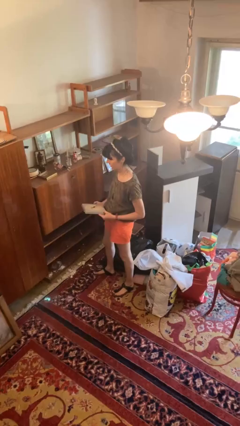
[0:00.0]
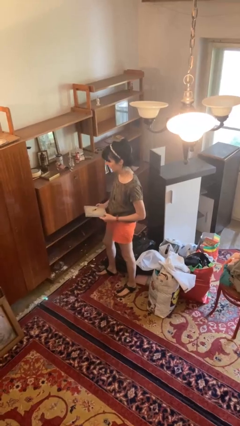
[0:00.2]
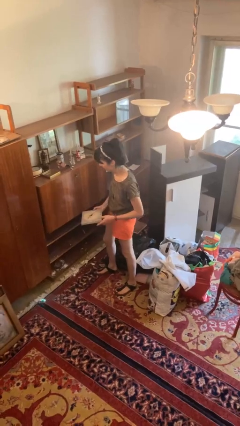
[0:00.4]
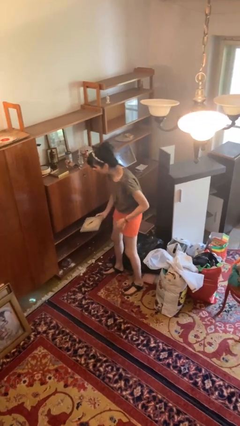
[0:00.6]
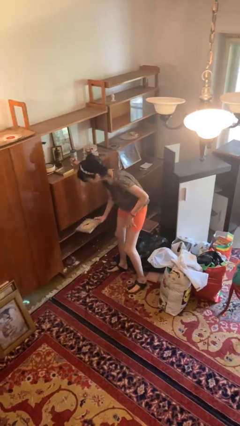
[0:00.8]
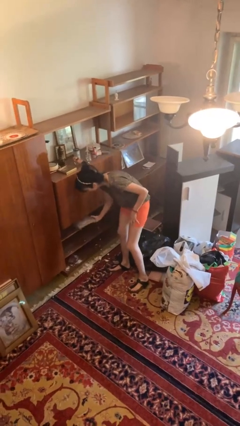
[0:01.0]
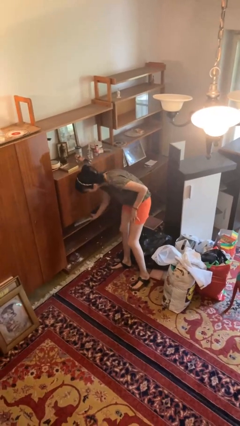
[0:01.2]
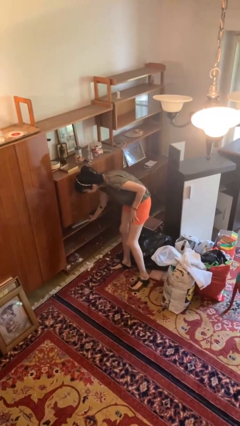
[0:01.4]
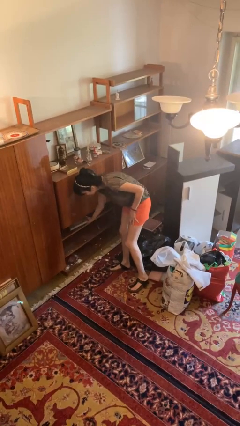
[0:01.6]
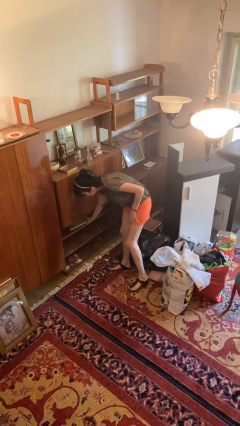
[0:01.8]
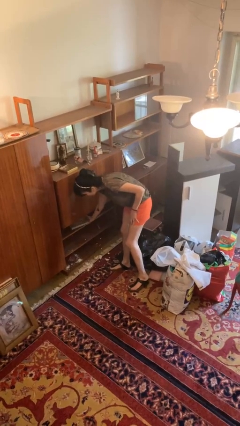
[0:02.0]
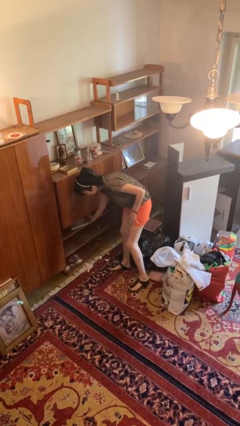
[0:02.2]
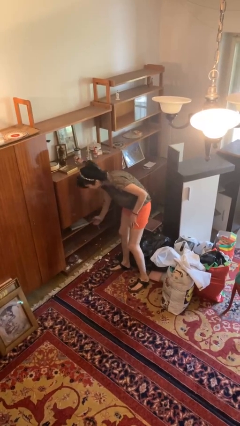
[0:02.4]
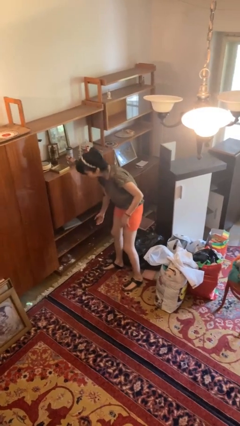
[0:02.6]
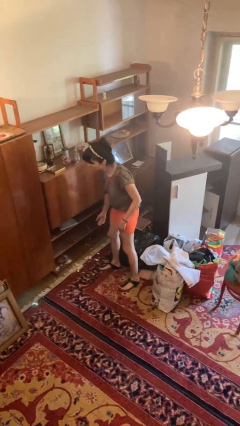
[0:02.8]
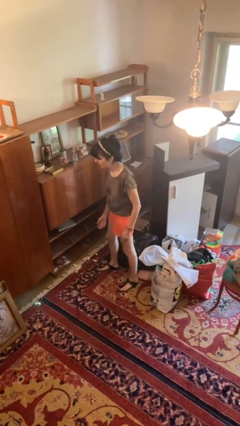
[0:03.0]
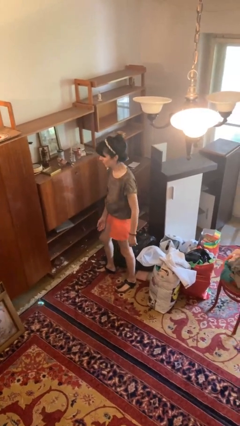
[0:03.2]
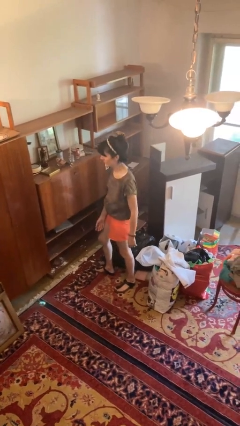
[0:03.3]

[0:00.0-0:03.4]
person puts down object into cabinet

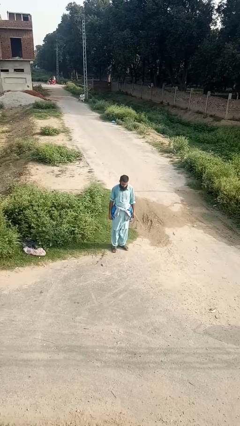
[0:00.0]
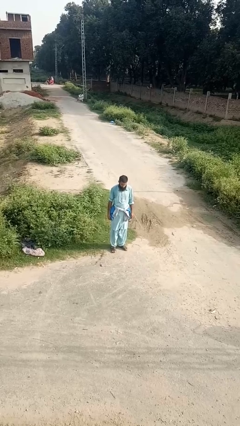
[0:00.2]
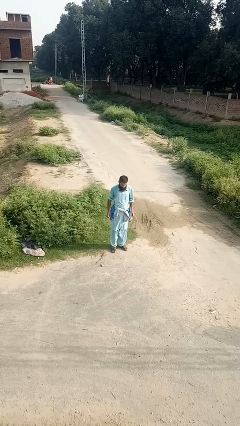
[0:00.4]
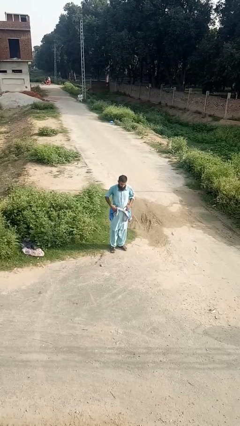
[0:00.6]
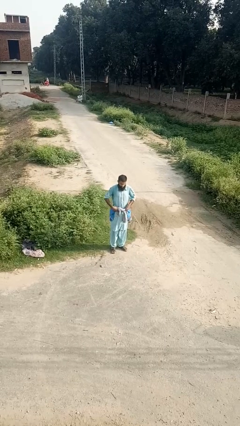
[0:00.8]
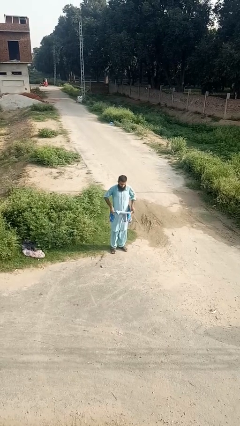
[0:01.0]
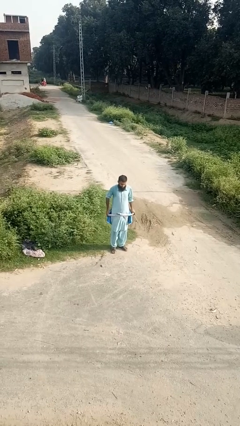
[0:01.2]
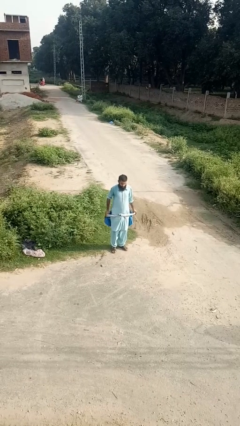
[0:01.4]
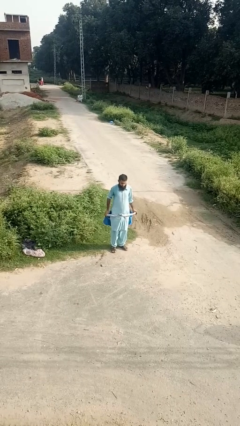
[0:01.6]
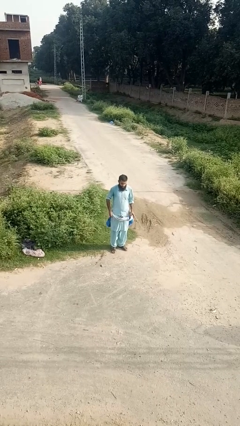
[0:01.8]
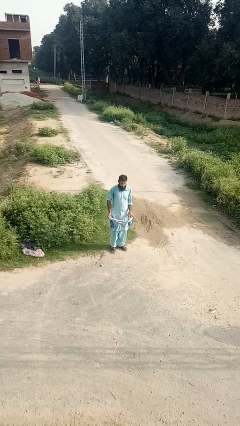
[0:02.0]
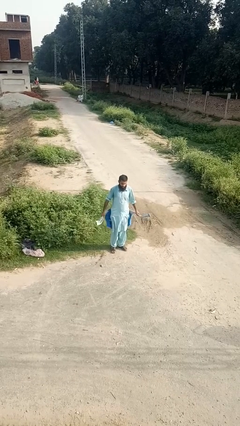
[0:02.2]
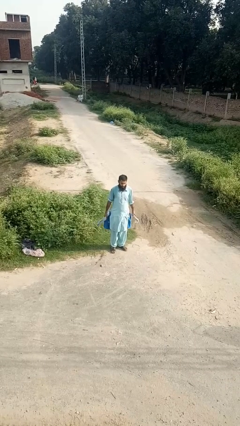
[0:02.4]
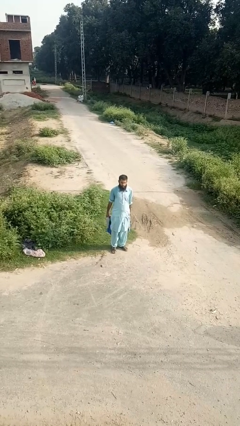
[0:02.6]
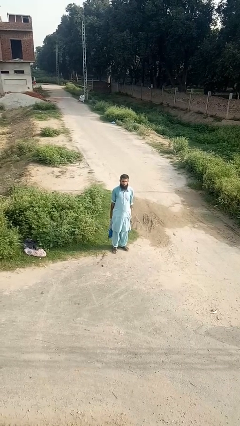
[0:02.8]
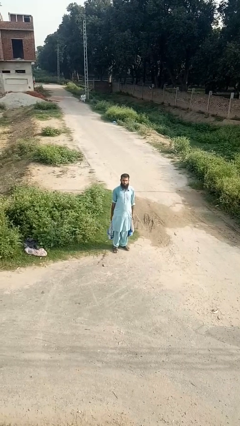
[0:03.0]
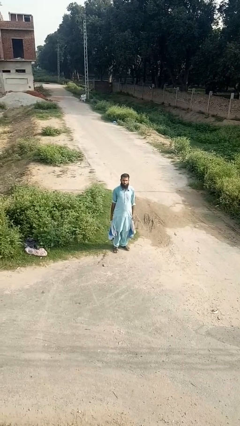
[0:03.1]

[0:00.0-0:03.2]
person unties jacket around waist

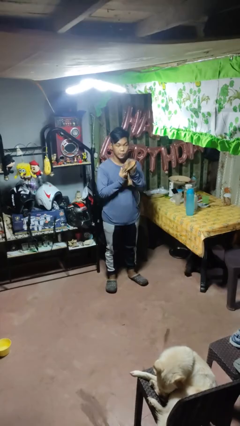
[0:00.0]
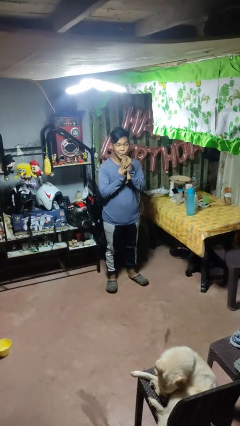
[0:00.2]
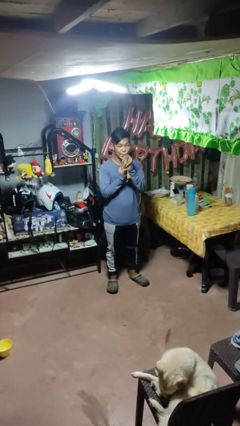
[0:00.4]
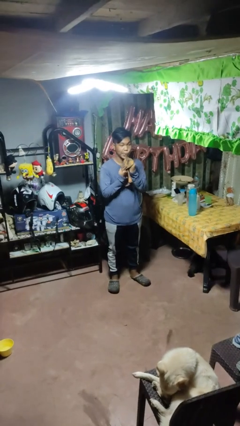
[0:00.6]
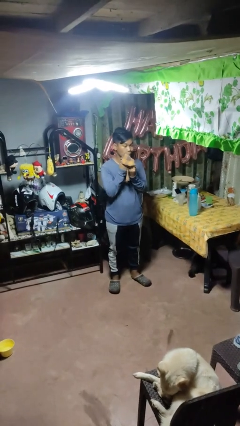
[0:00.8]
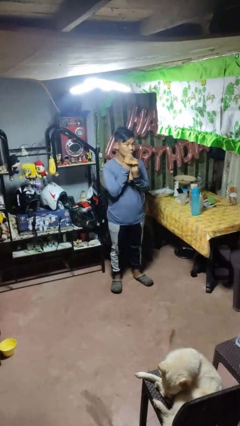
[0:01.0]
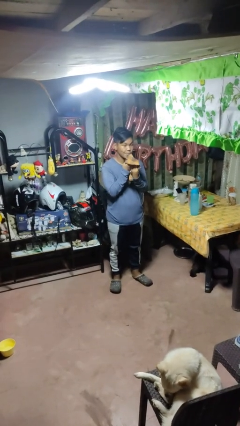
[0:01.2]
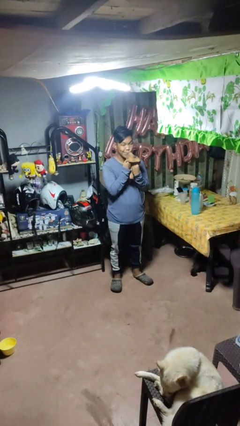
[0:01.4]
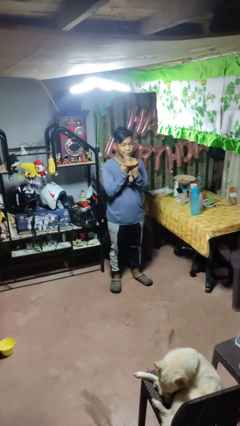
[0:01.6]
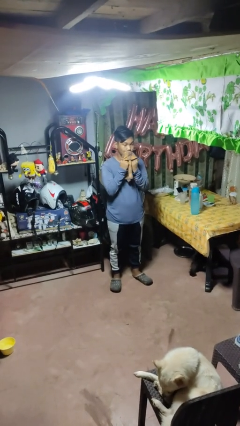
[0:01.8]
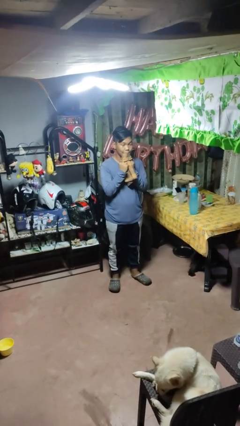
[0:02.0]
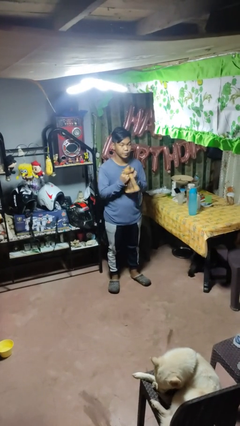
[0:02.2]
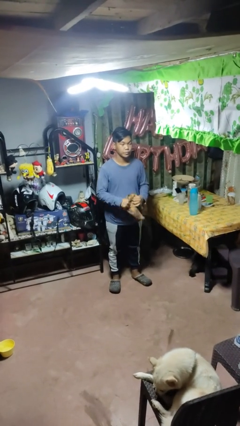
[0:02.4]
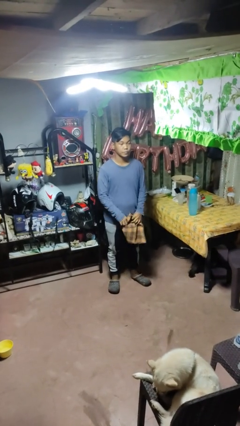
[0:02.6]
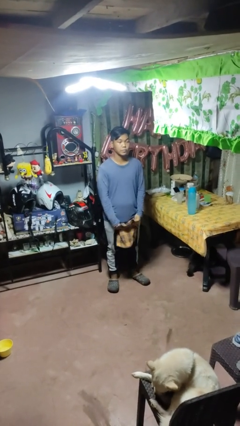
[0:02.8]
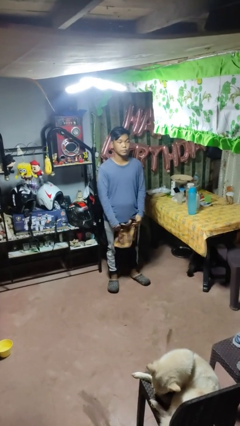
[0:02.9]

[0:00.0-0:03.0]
person wipes mouth with napkin

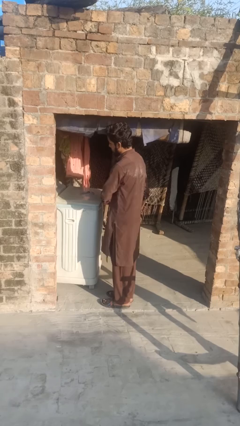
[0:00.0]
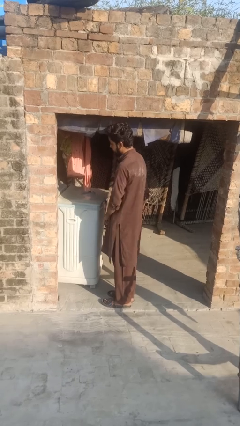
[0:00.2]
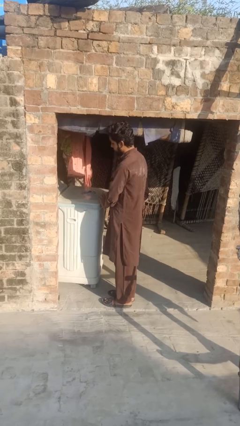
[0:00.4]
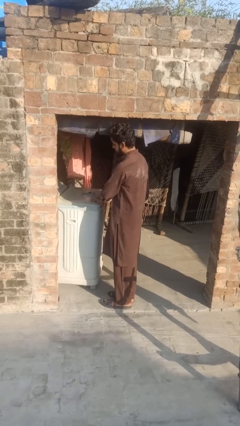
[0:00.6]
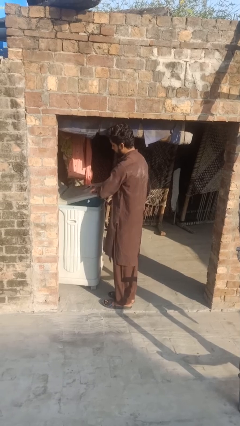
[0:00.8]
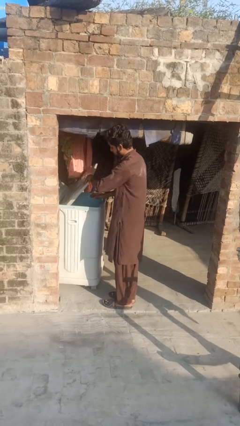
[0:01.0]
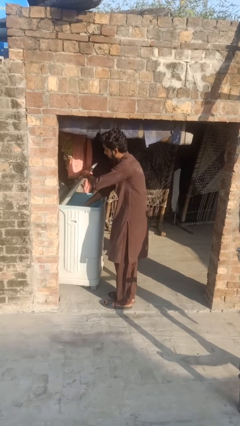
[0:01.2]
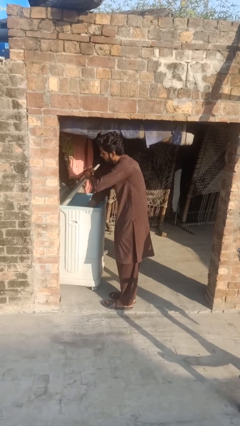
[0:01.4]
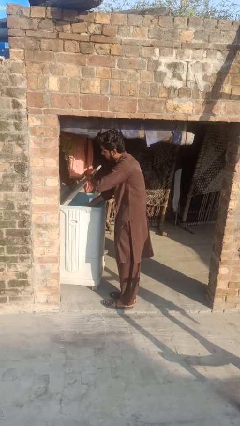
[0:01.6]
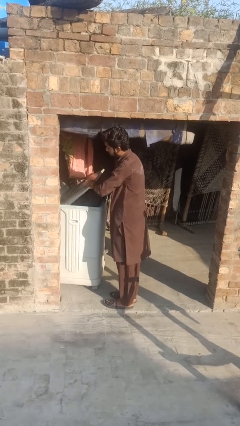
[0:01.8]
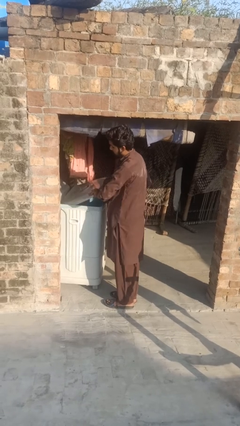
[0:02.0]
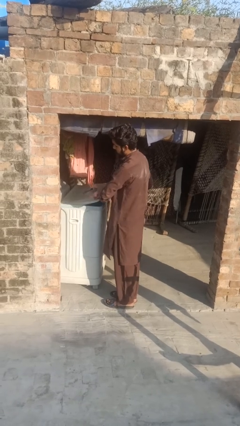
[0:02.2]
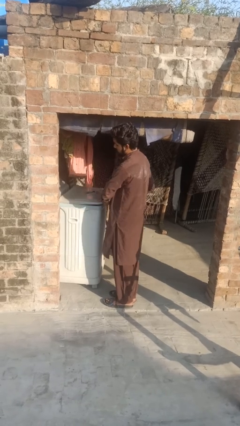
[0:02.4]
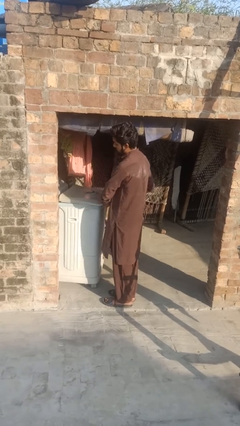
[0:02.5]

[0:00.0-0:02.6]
person unloads dryer

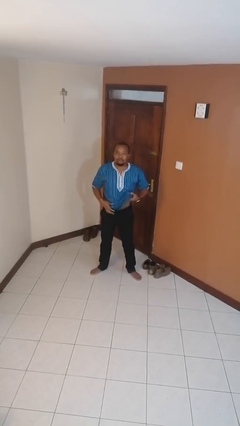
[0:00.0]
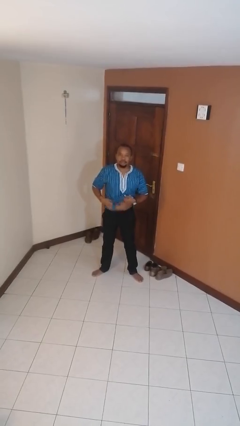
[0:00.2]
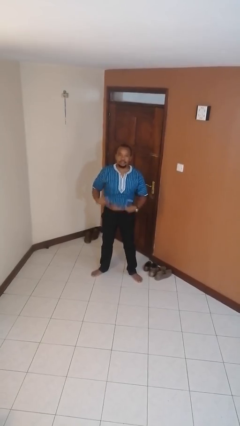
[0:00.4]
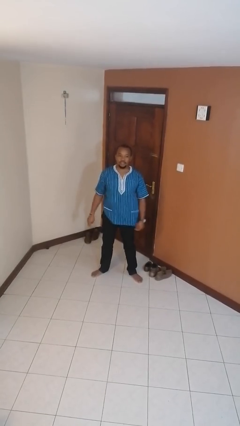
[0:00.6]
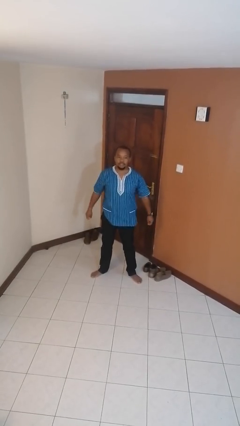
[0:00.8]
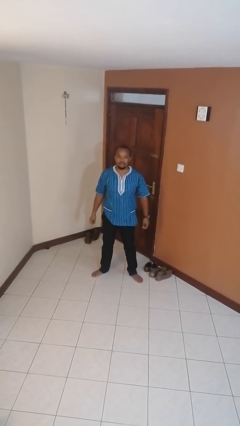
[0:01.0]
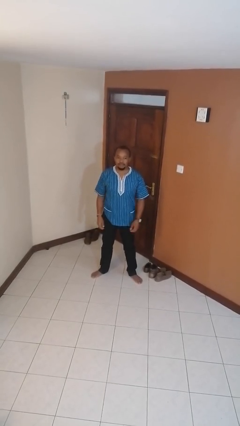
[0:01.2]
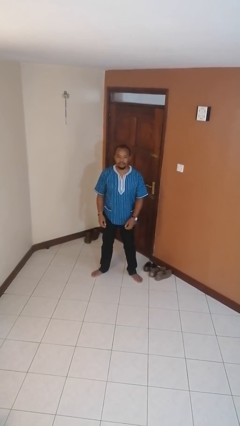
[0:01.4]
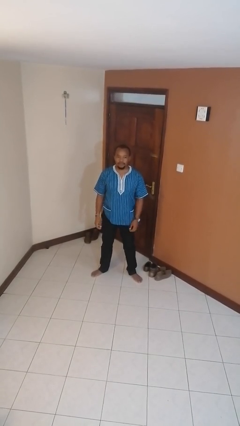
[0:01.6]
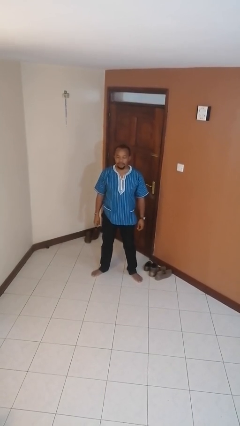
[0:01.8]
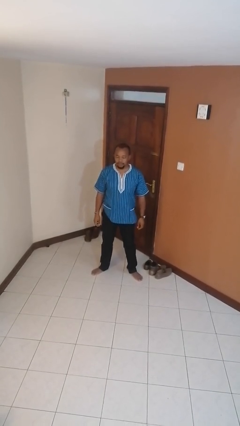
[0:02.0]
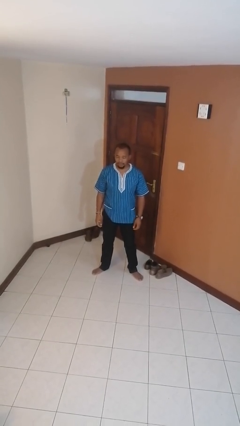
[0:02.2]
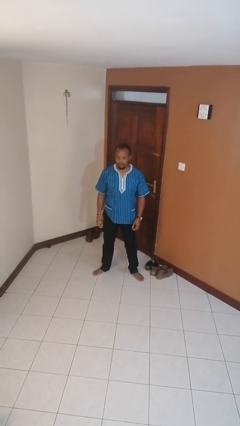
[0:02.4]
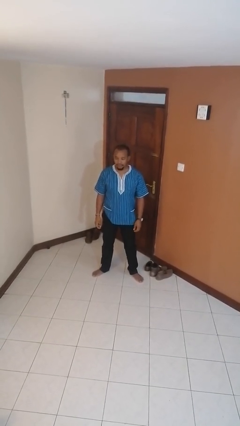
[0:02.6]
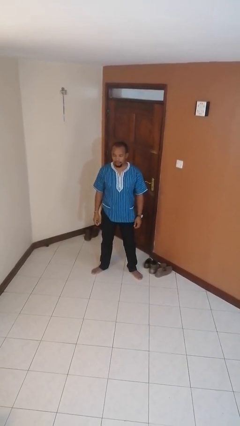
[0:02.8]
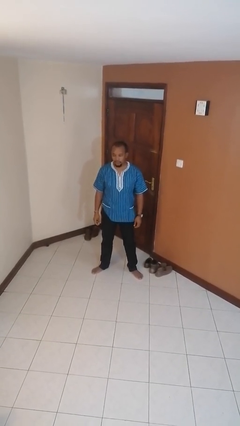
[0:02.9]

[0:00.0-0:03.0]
person untucks shirt

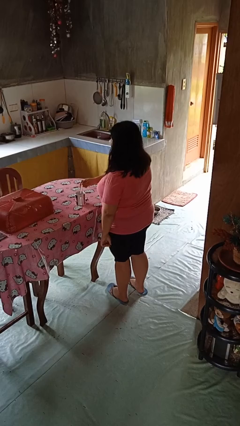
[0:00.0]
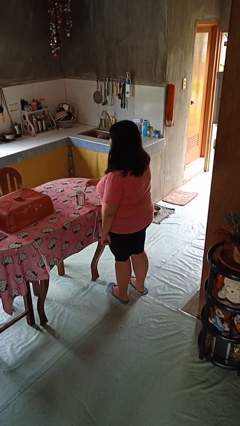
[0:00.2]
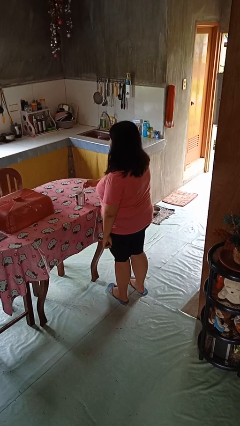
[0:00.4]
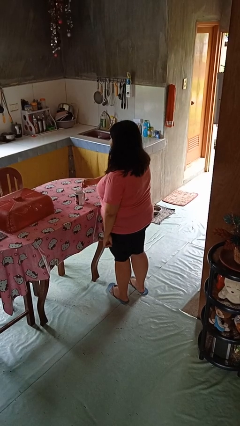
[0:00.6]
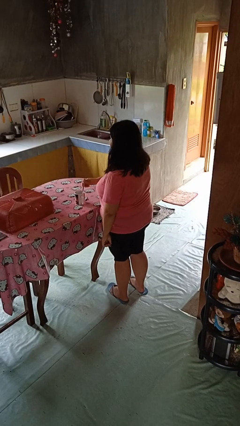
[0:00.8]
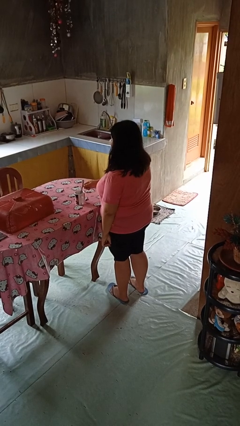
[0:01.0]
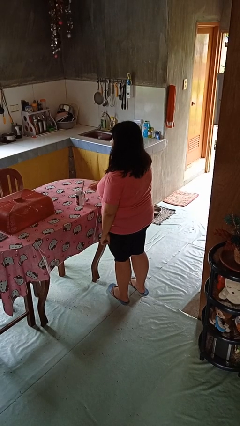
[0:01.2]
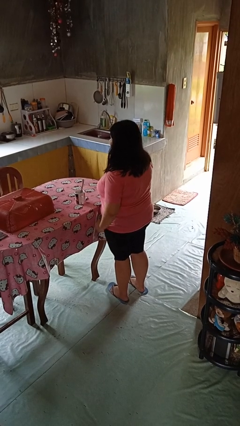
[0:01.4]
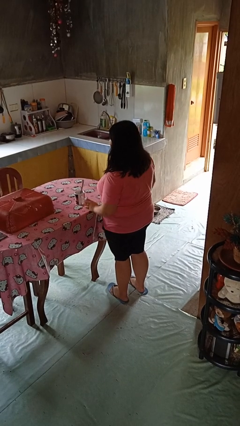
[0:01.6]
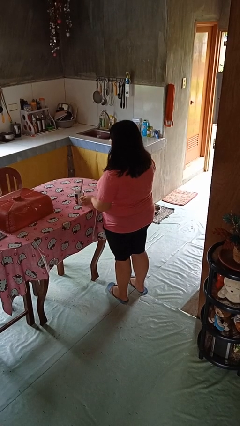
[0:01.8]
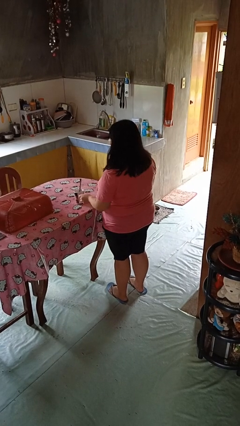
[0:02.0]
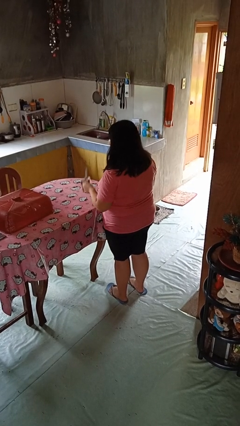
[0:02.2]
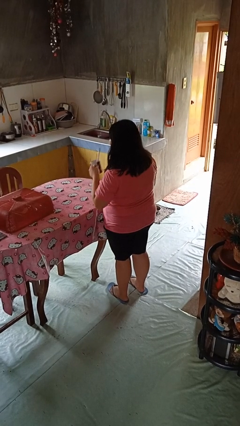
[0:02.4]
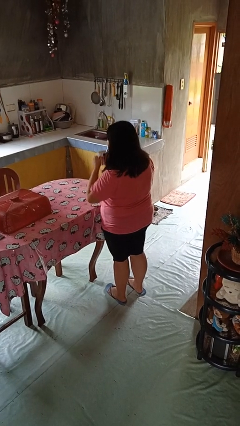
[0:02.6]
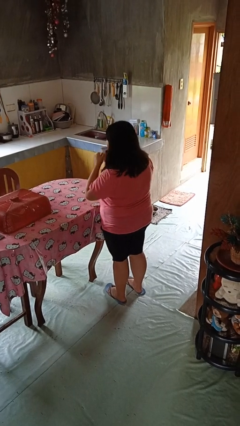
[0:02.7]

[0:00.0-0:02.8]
person stirs mug
